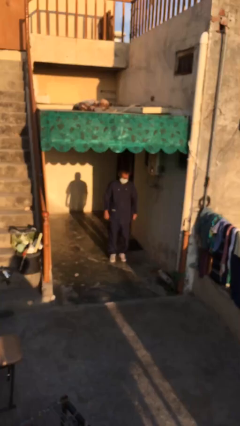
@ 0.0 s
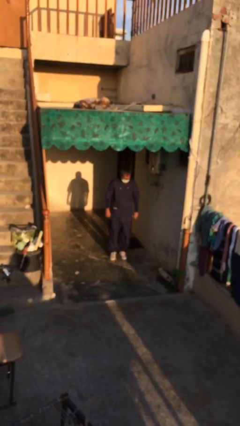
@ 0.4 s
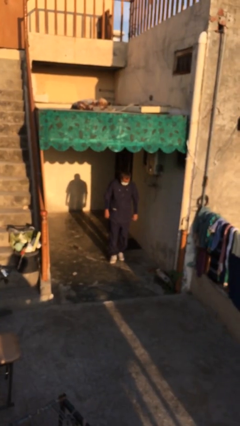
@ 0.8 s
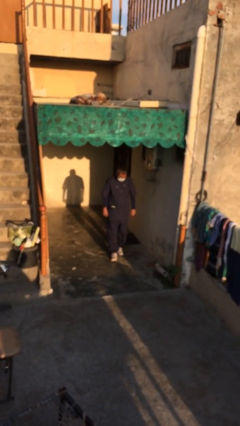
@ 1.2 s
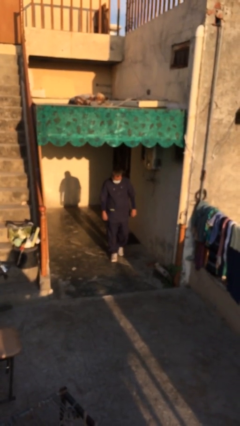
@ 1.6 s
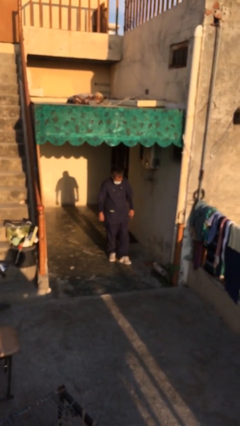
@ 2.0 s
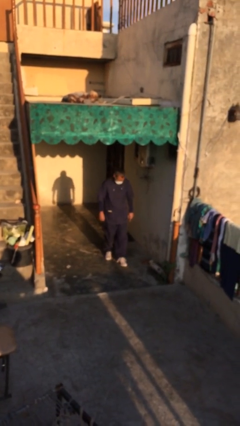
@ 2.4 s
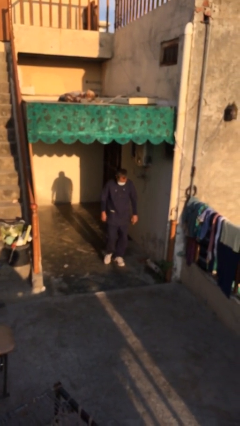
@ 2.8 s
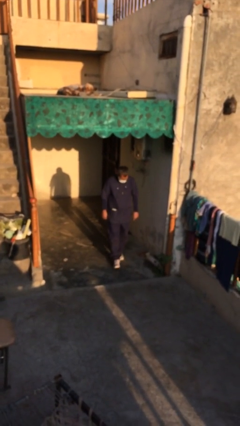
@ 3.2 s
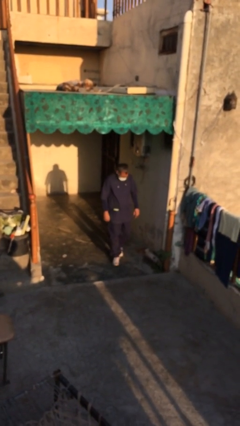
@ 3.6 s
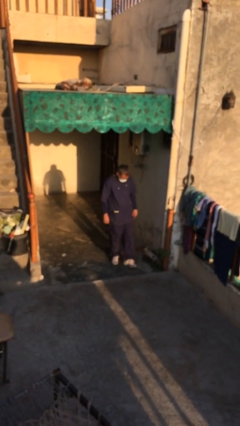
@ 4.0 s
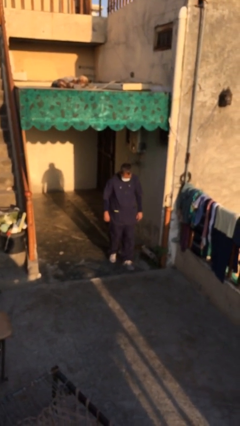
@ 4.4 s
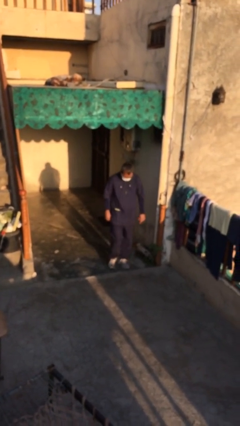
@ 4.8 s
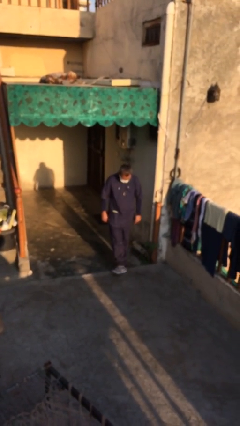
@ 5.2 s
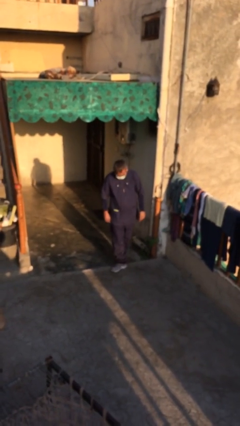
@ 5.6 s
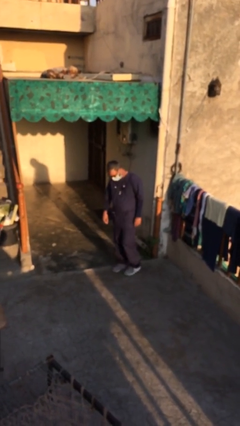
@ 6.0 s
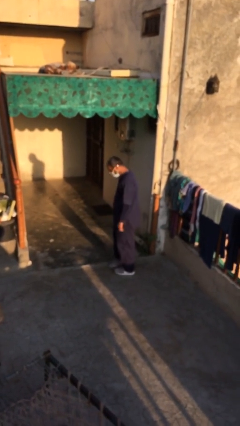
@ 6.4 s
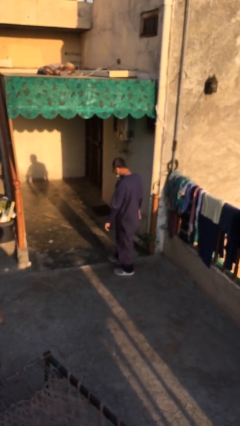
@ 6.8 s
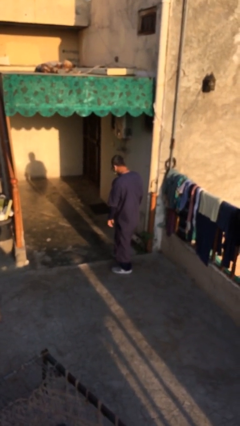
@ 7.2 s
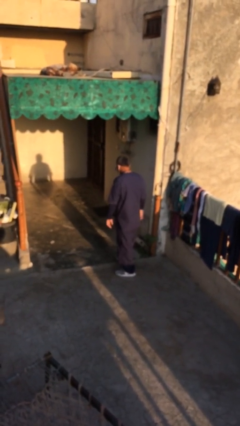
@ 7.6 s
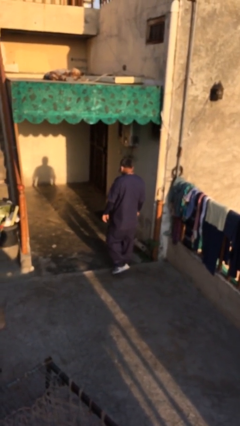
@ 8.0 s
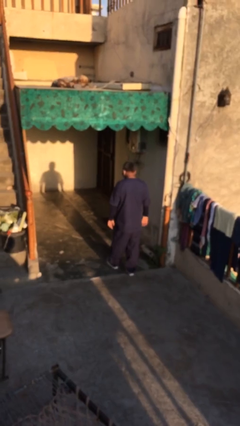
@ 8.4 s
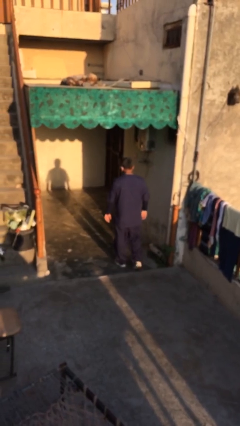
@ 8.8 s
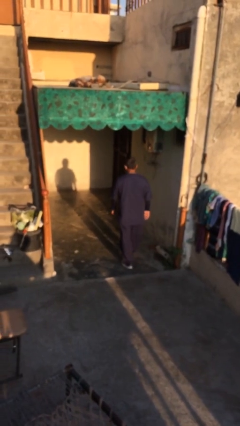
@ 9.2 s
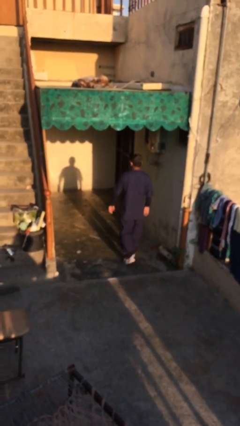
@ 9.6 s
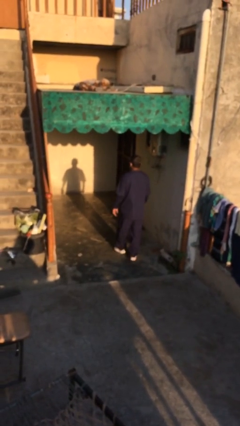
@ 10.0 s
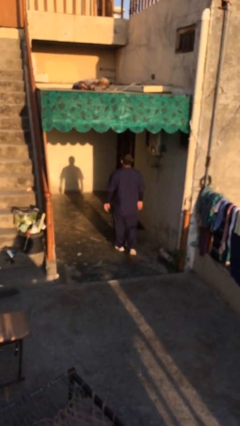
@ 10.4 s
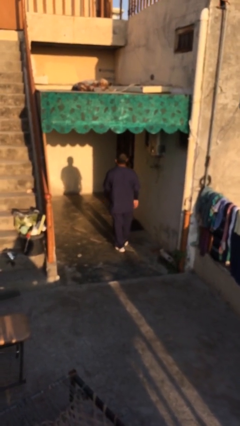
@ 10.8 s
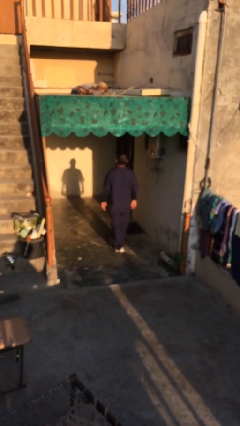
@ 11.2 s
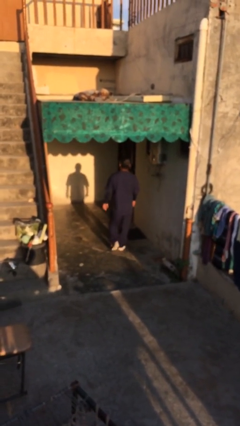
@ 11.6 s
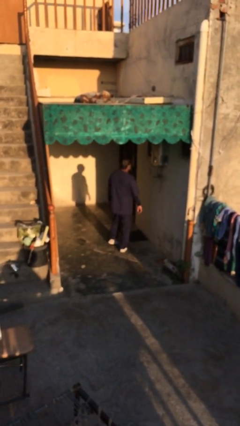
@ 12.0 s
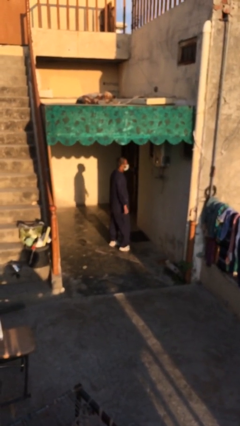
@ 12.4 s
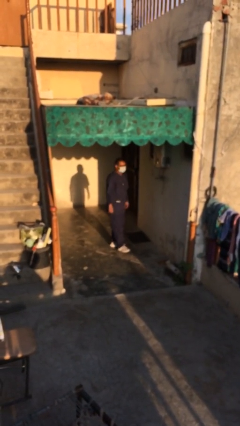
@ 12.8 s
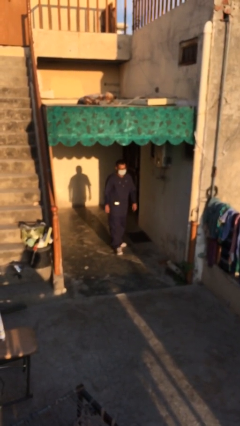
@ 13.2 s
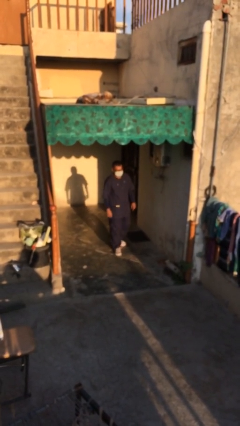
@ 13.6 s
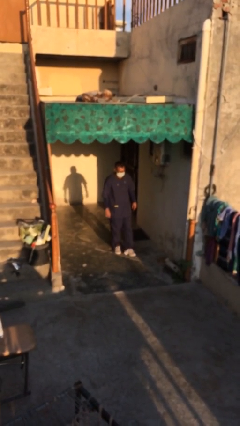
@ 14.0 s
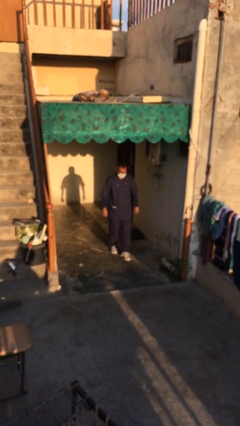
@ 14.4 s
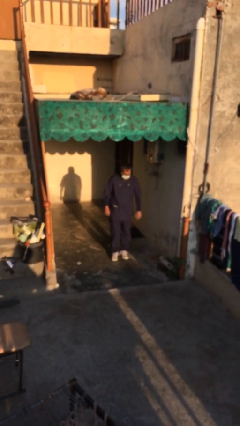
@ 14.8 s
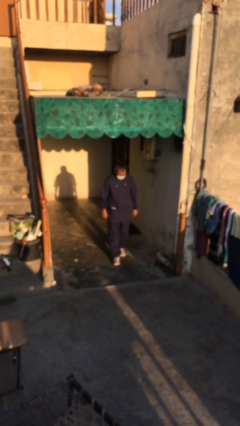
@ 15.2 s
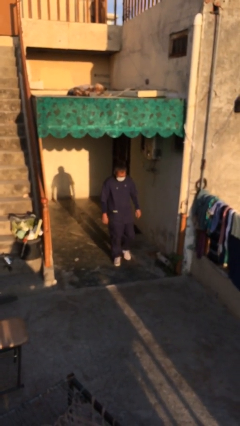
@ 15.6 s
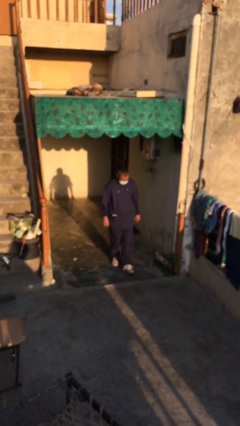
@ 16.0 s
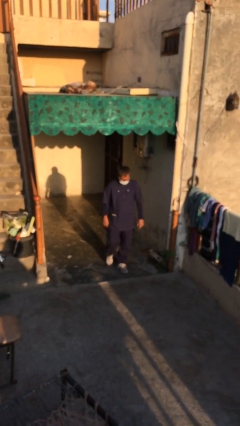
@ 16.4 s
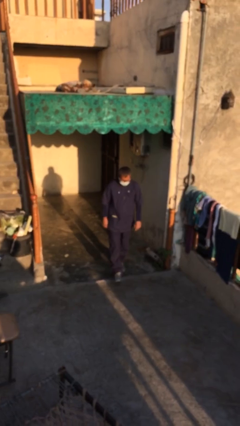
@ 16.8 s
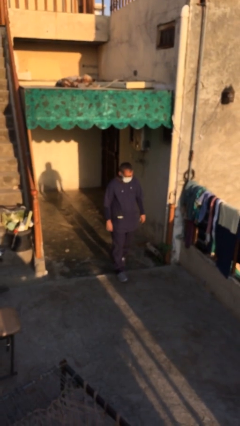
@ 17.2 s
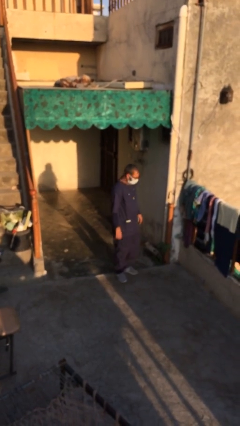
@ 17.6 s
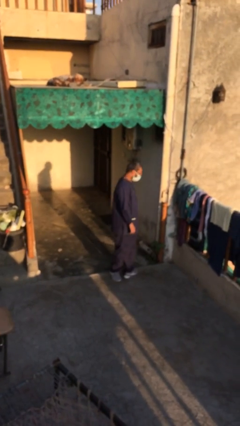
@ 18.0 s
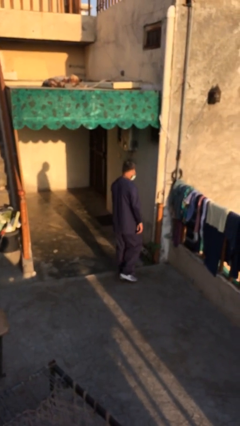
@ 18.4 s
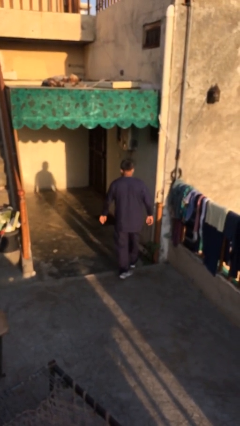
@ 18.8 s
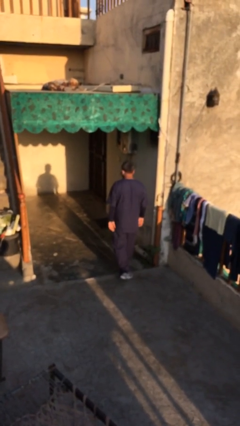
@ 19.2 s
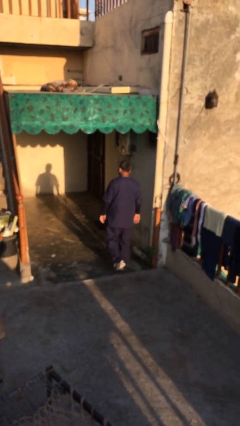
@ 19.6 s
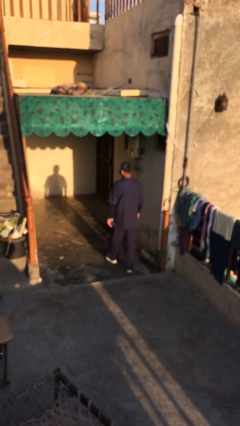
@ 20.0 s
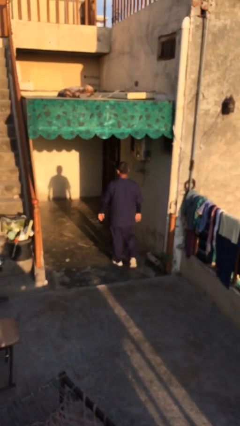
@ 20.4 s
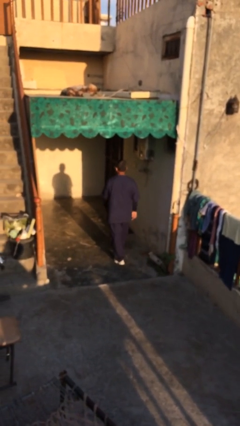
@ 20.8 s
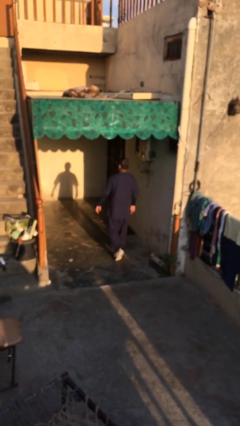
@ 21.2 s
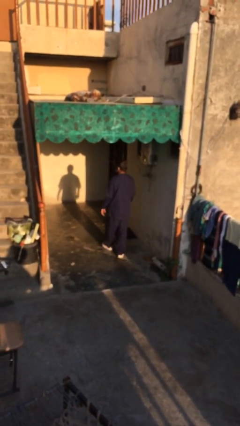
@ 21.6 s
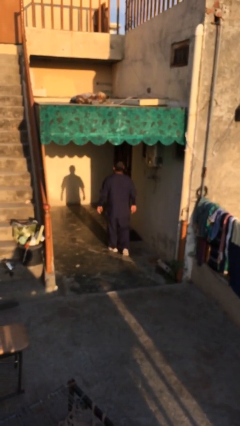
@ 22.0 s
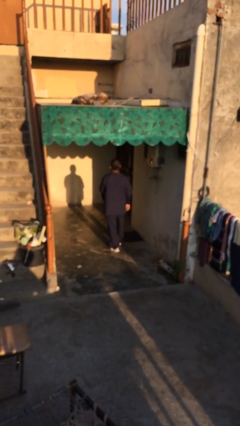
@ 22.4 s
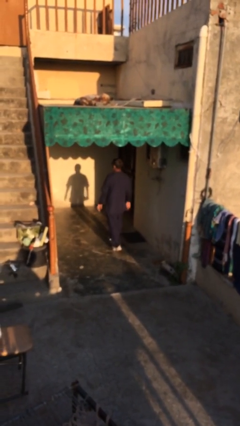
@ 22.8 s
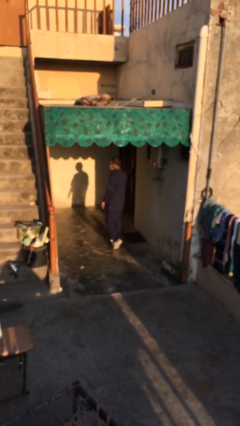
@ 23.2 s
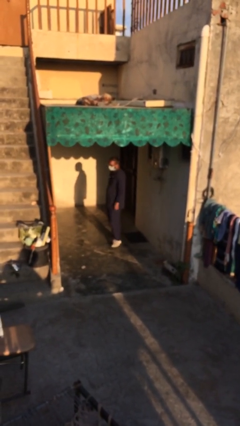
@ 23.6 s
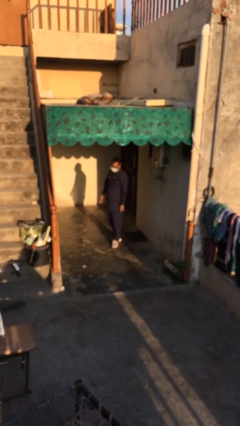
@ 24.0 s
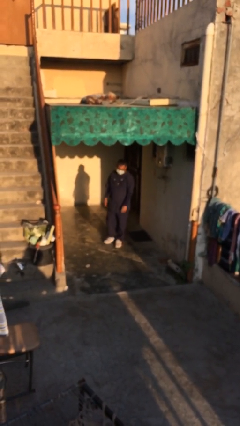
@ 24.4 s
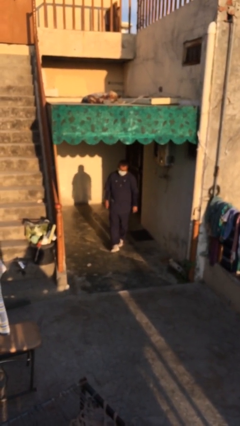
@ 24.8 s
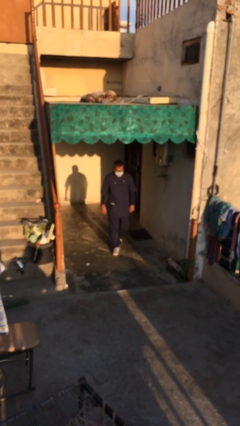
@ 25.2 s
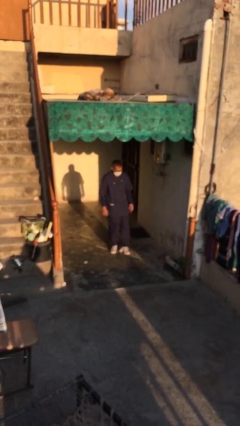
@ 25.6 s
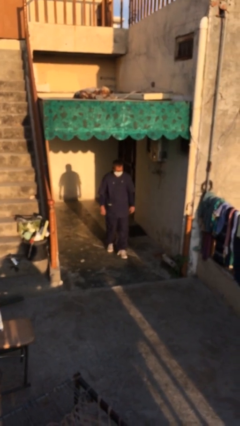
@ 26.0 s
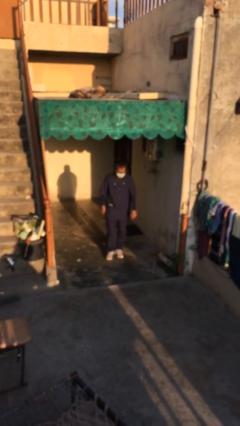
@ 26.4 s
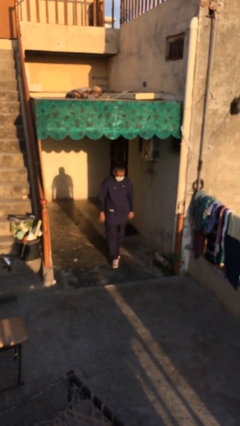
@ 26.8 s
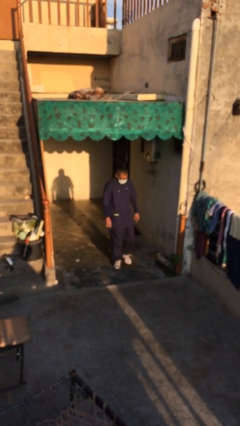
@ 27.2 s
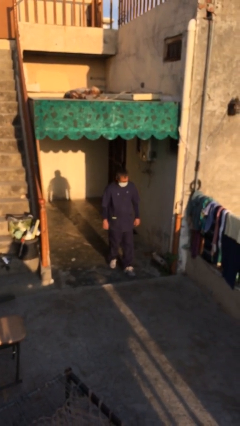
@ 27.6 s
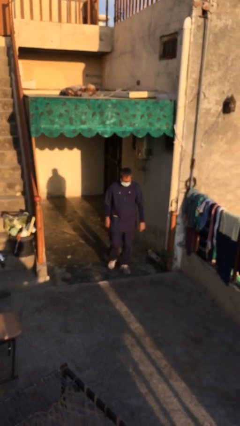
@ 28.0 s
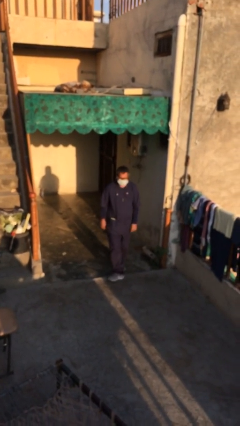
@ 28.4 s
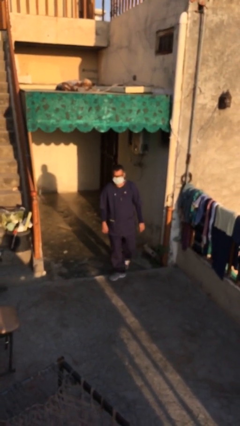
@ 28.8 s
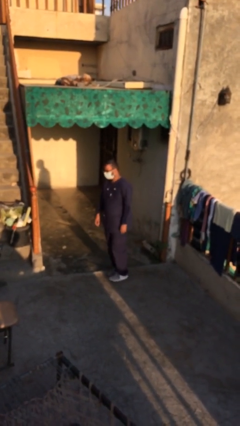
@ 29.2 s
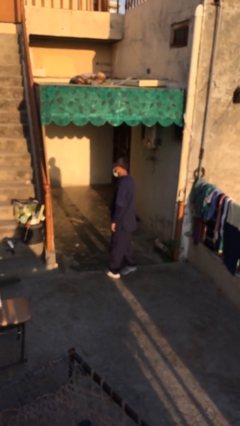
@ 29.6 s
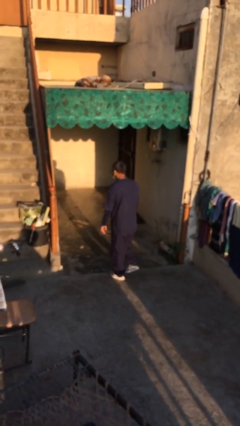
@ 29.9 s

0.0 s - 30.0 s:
person walks

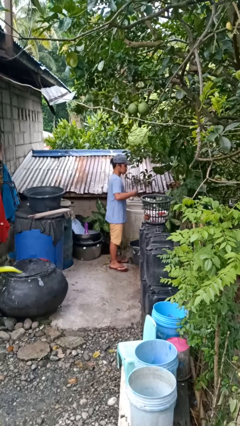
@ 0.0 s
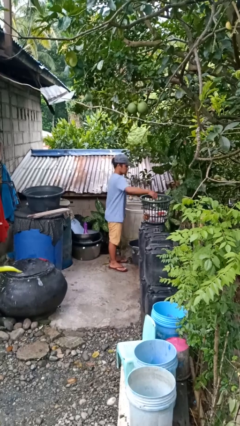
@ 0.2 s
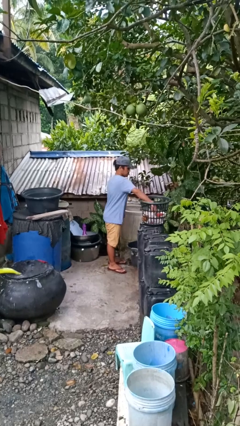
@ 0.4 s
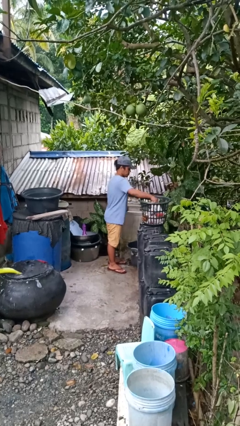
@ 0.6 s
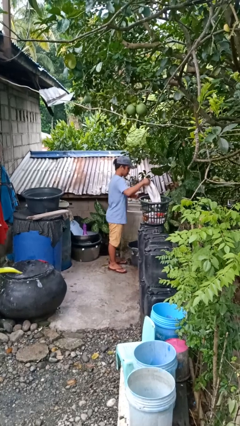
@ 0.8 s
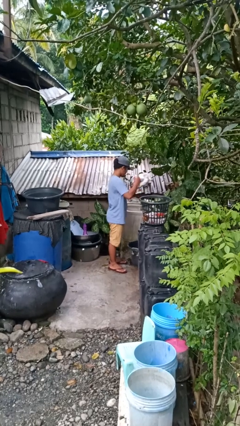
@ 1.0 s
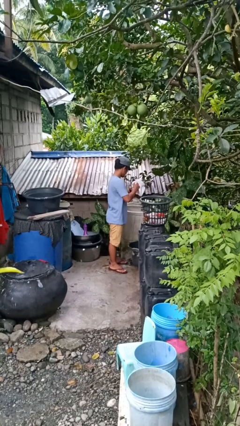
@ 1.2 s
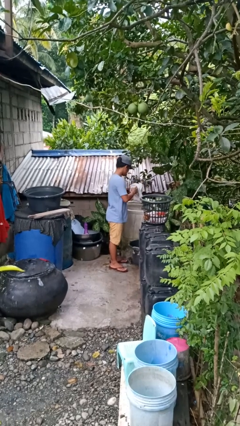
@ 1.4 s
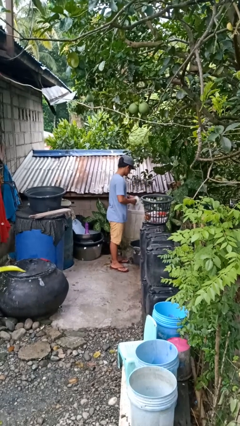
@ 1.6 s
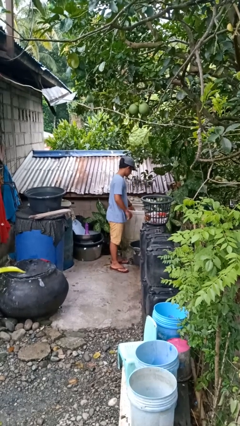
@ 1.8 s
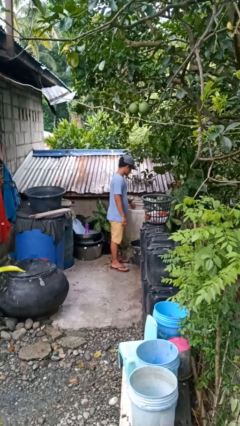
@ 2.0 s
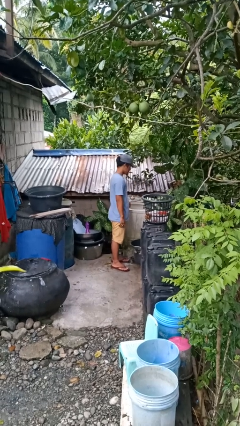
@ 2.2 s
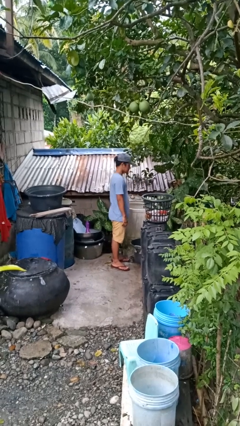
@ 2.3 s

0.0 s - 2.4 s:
person loads dishwasher

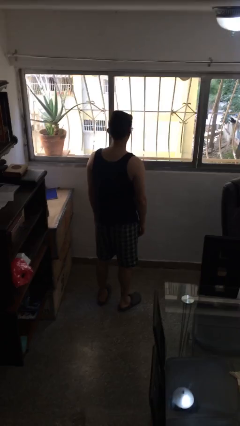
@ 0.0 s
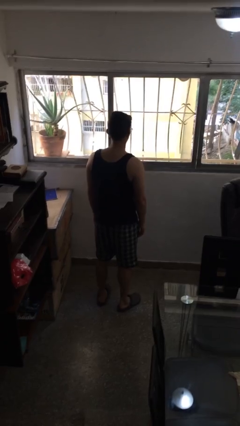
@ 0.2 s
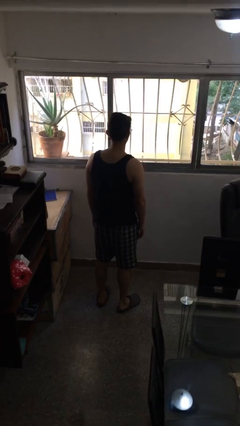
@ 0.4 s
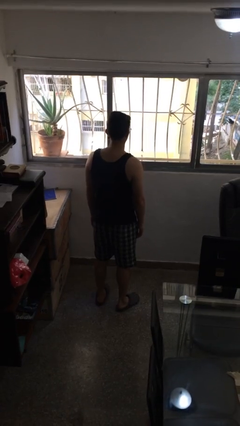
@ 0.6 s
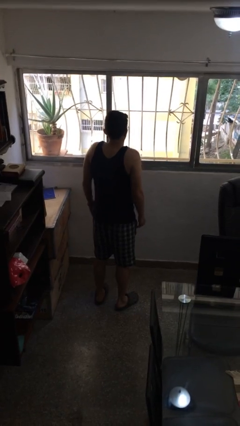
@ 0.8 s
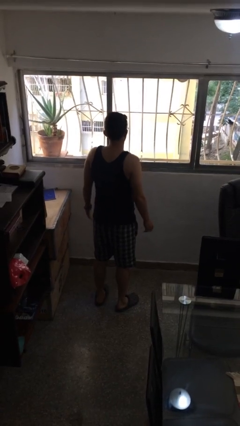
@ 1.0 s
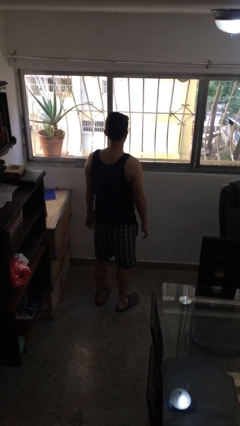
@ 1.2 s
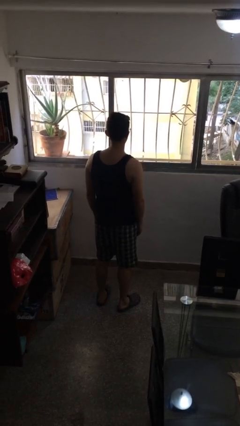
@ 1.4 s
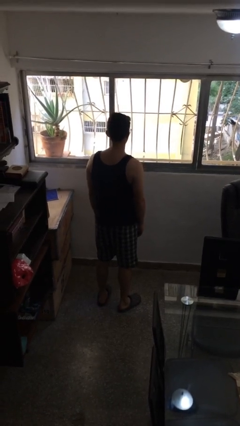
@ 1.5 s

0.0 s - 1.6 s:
person shrugs
